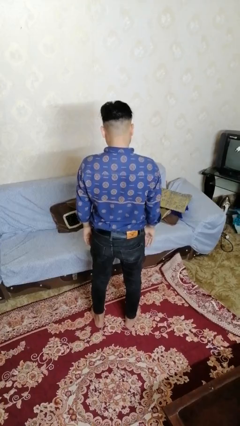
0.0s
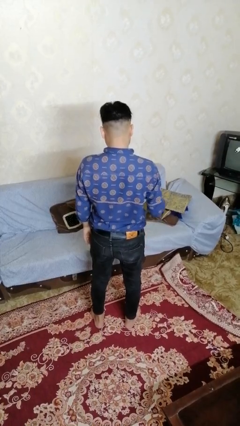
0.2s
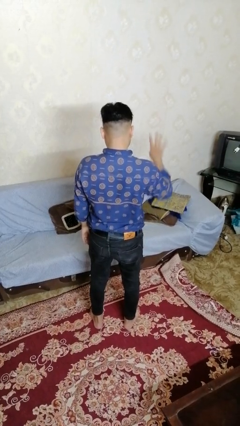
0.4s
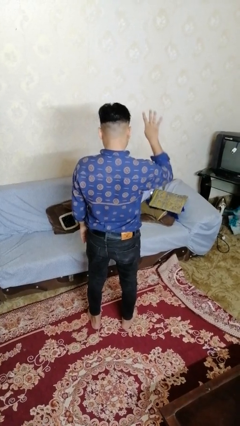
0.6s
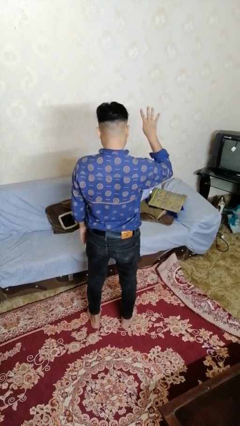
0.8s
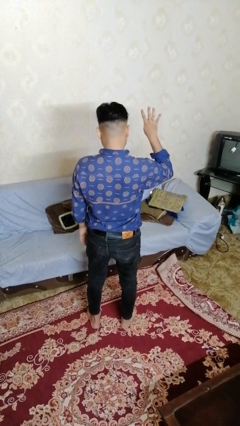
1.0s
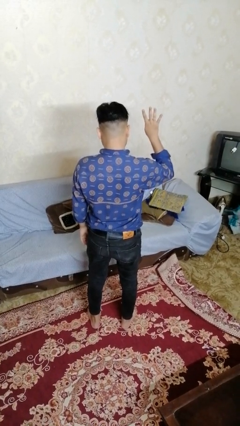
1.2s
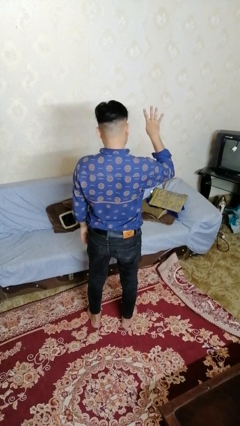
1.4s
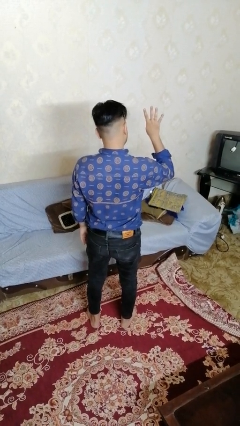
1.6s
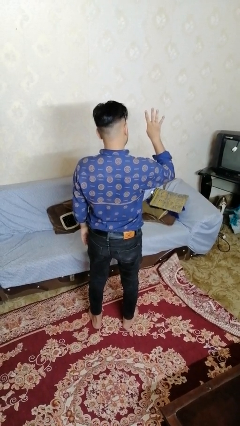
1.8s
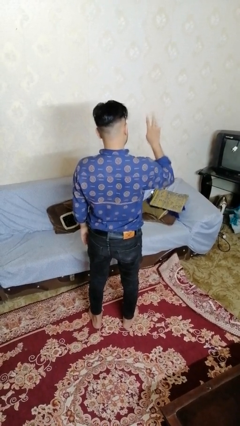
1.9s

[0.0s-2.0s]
person gestures number four

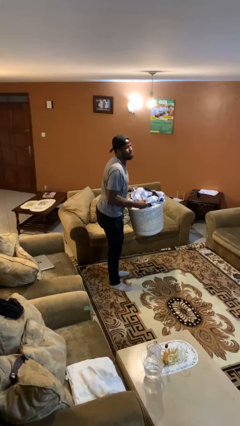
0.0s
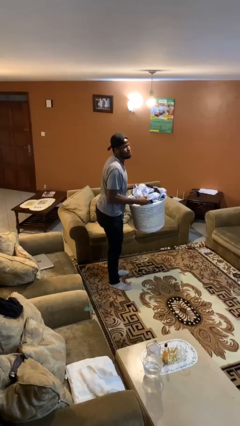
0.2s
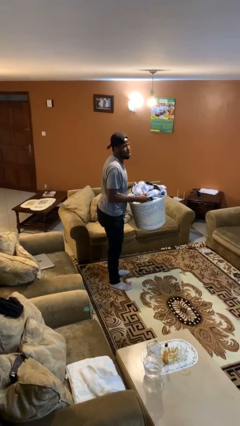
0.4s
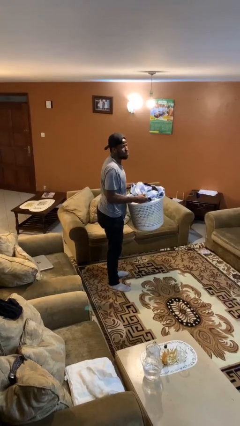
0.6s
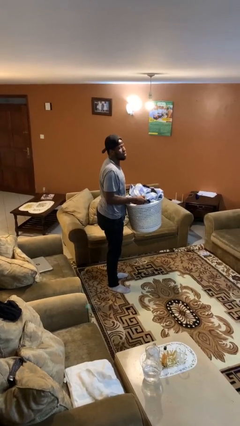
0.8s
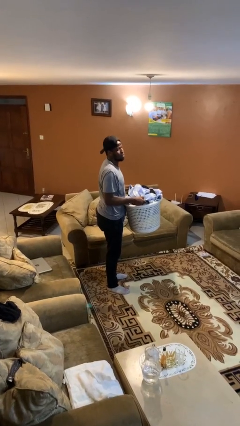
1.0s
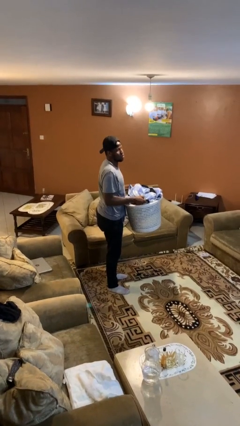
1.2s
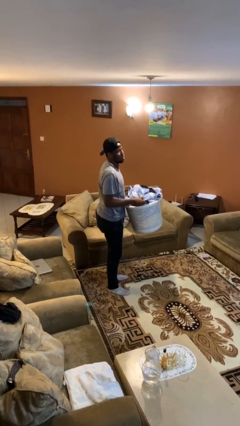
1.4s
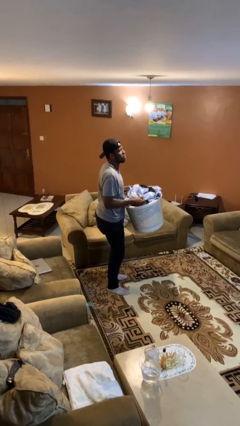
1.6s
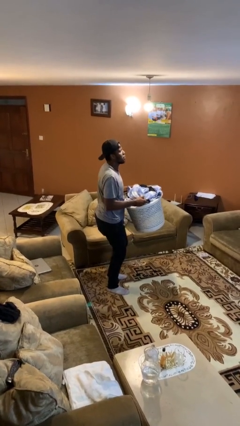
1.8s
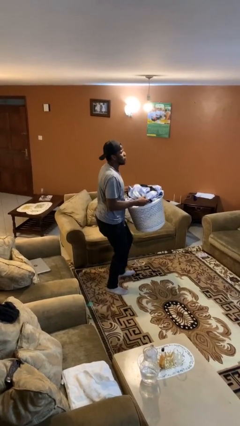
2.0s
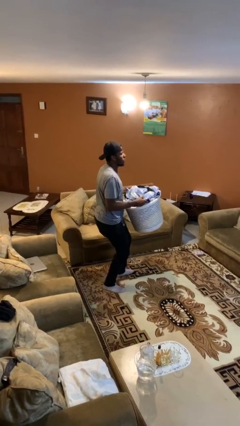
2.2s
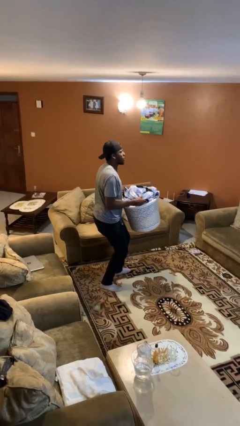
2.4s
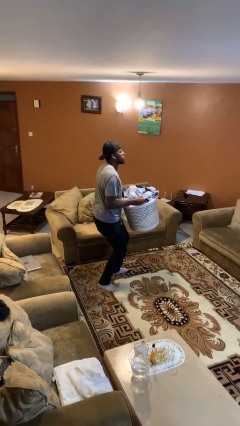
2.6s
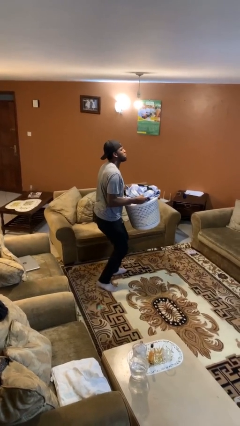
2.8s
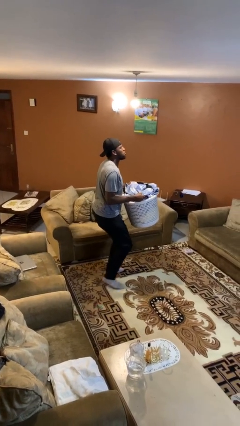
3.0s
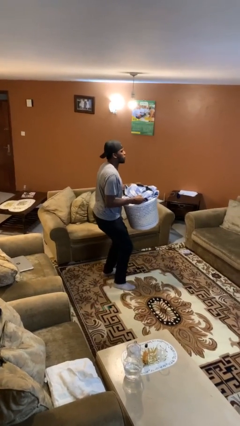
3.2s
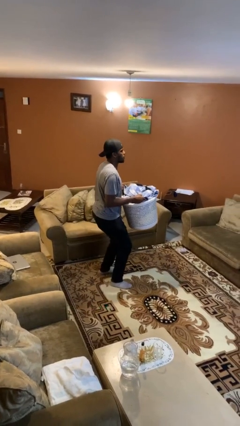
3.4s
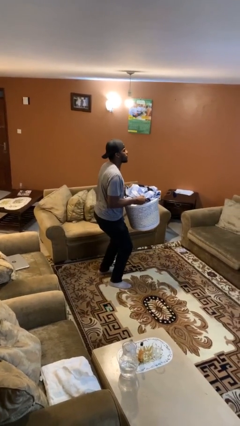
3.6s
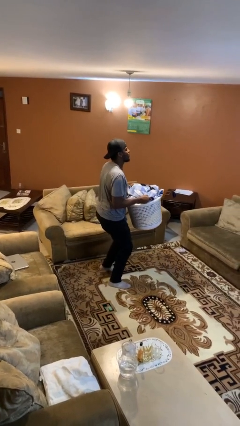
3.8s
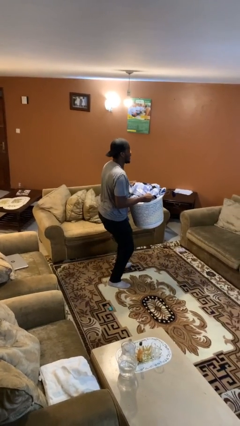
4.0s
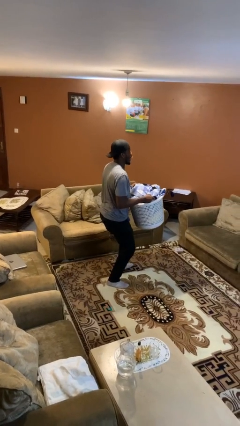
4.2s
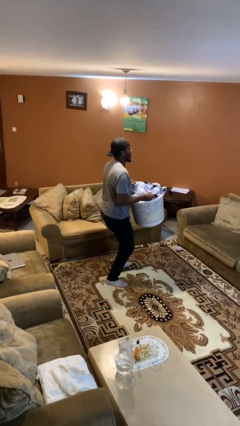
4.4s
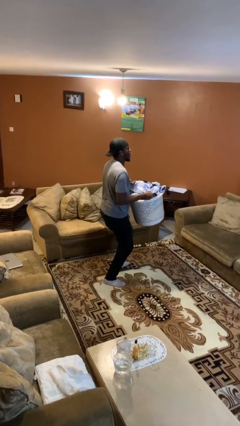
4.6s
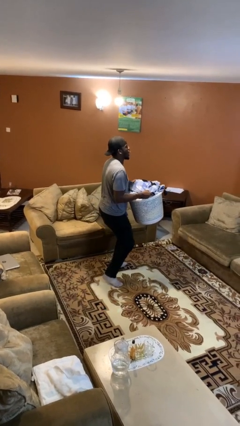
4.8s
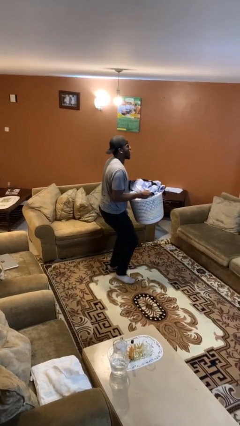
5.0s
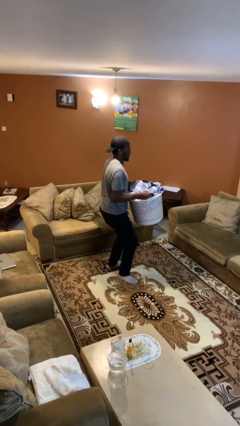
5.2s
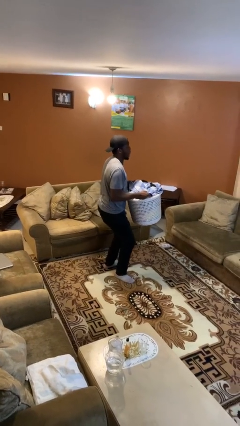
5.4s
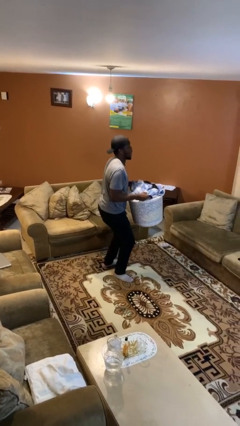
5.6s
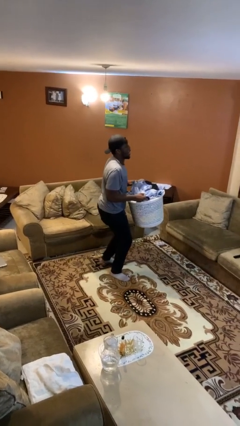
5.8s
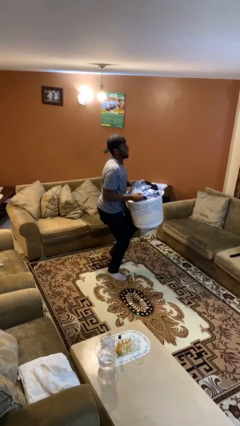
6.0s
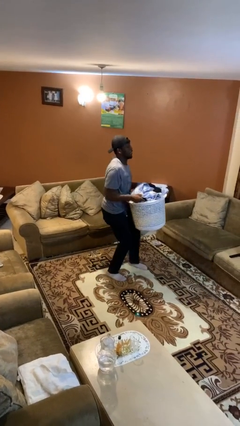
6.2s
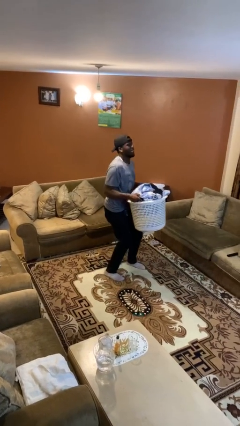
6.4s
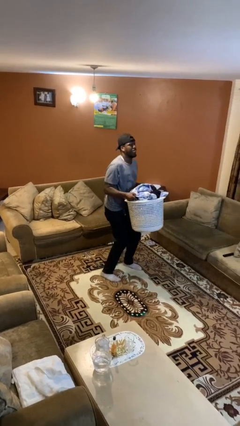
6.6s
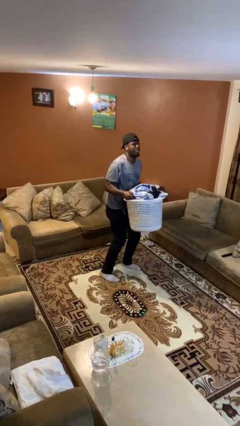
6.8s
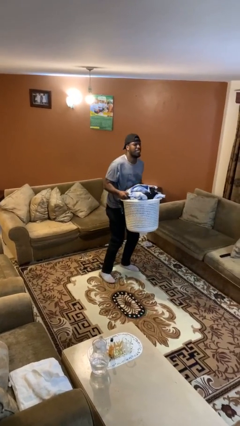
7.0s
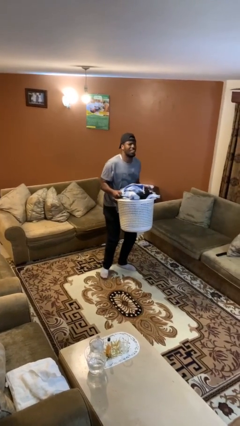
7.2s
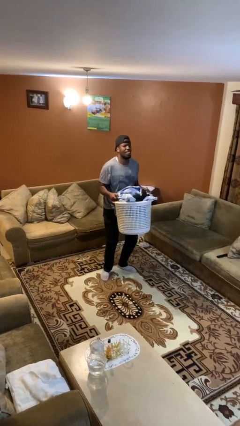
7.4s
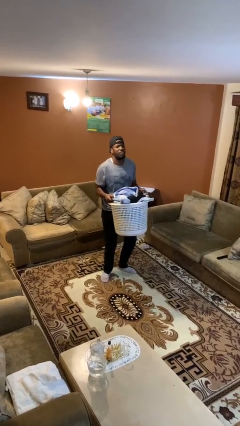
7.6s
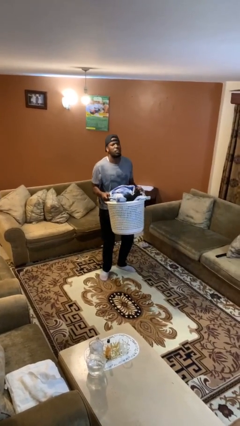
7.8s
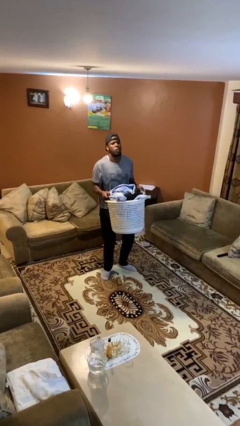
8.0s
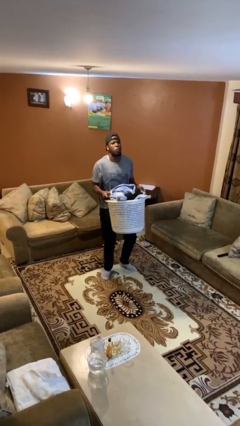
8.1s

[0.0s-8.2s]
person carries heavy object

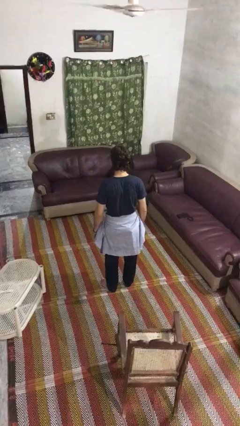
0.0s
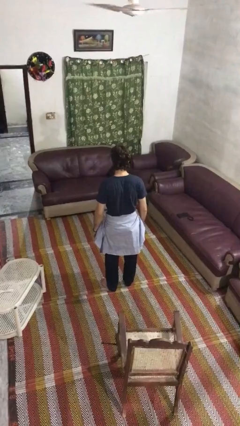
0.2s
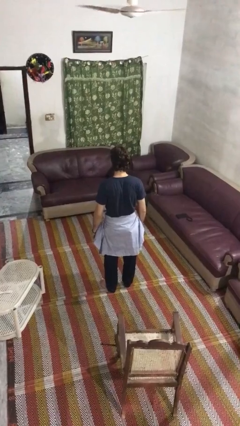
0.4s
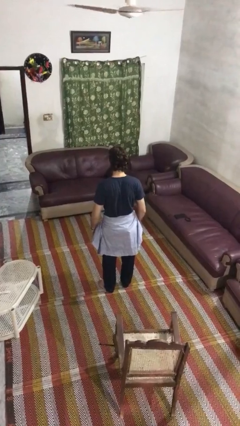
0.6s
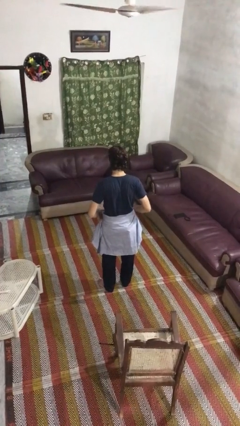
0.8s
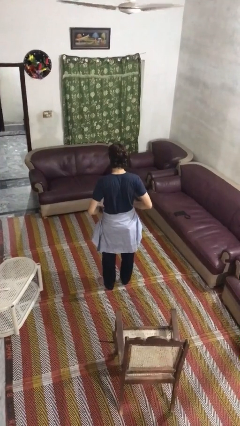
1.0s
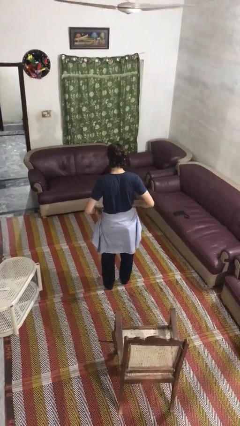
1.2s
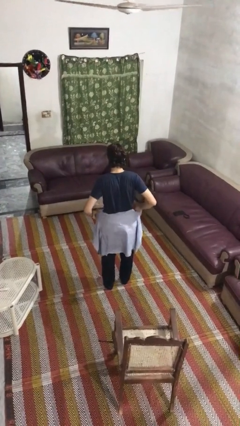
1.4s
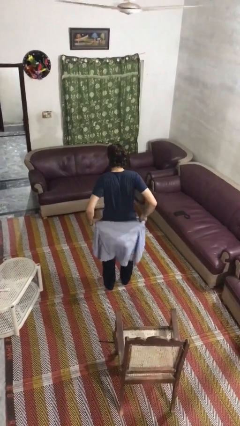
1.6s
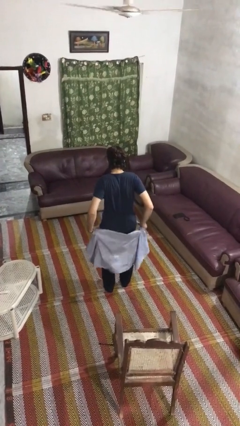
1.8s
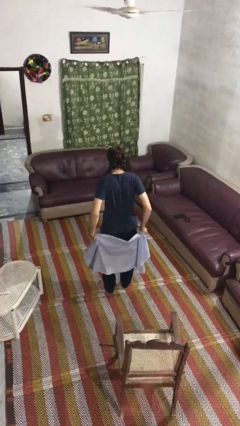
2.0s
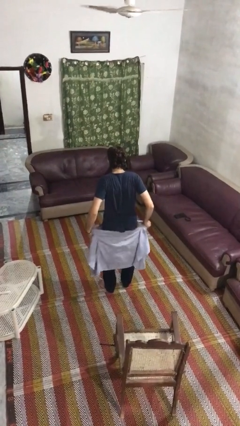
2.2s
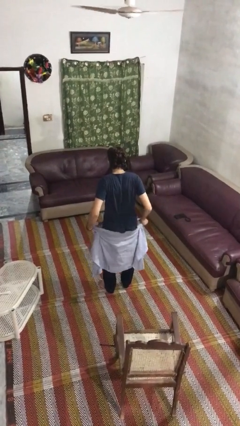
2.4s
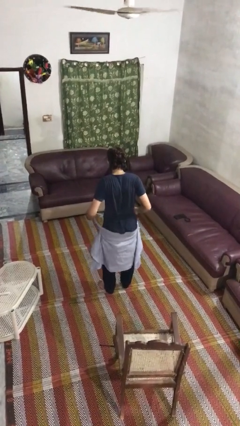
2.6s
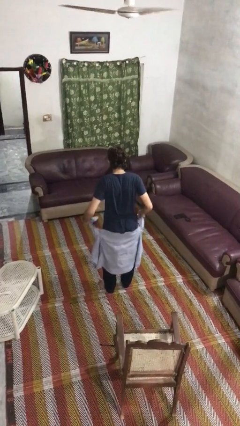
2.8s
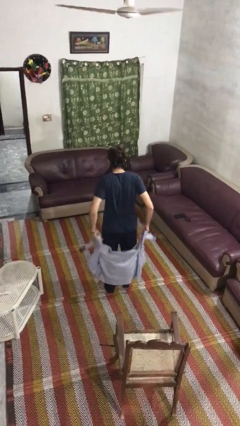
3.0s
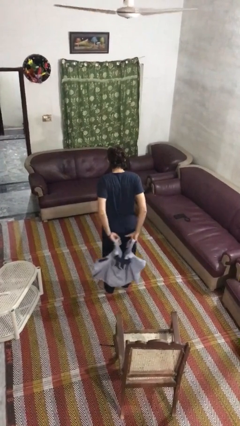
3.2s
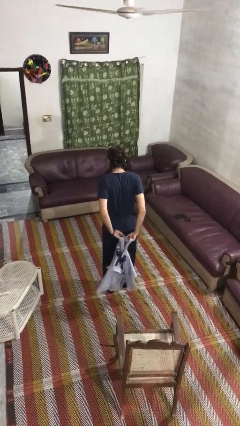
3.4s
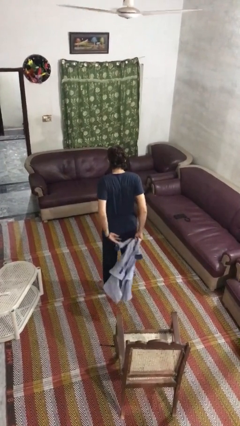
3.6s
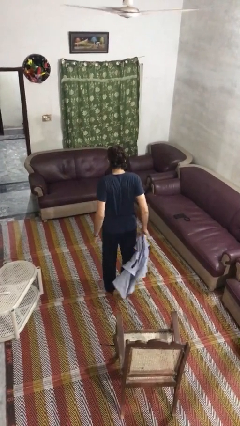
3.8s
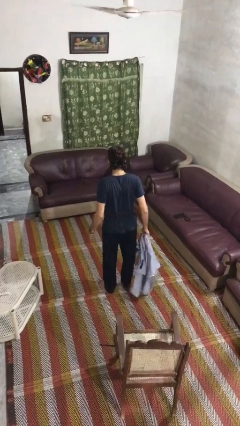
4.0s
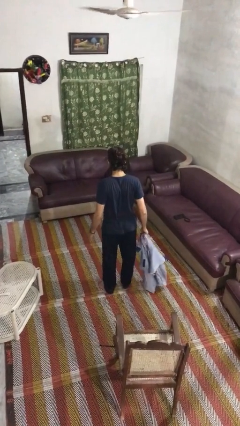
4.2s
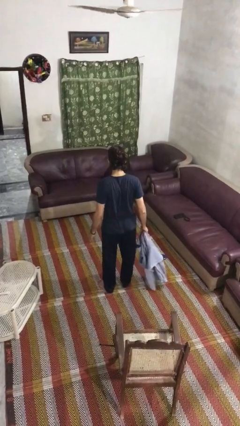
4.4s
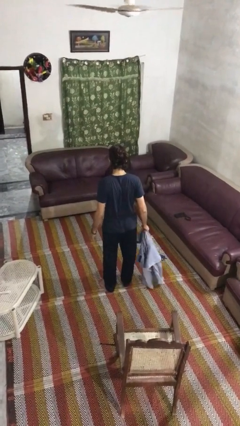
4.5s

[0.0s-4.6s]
person unties jacket around waist

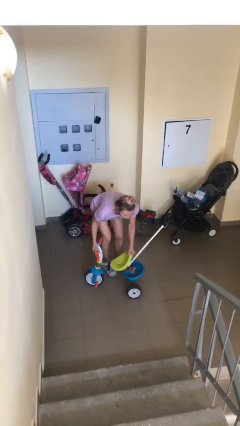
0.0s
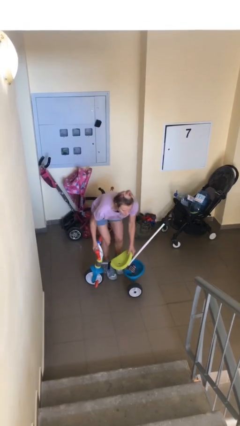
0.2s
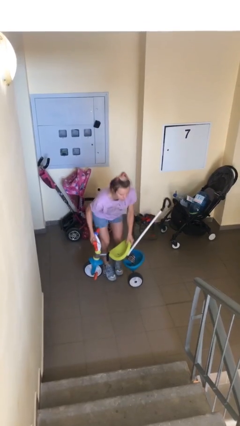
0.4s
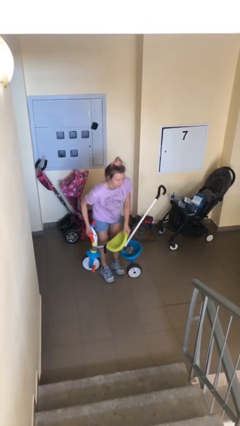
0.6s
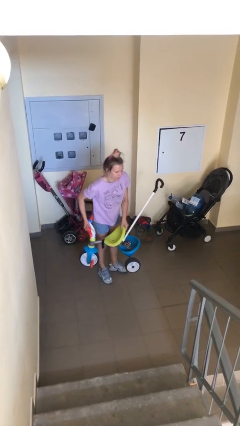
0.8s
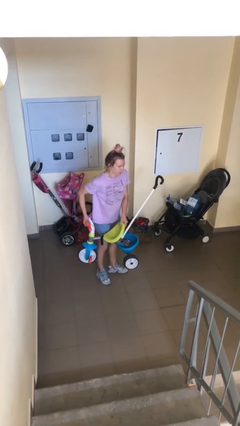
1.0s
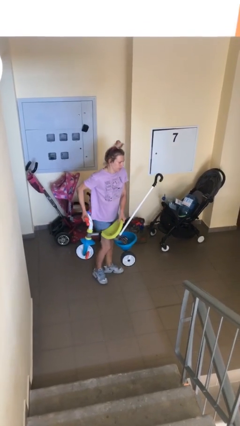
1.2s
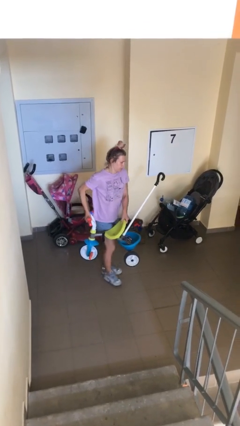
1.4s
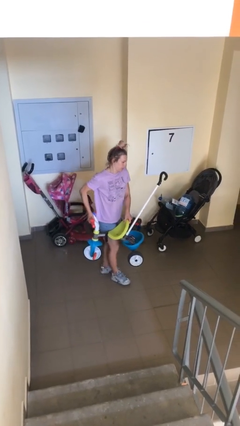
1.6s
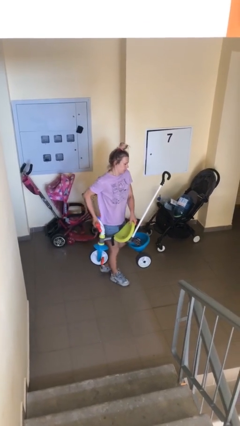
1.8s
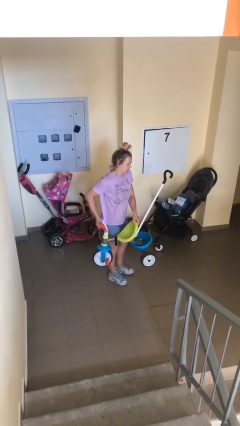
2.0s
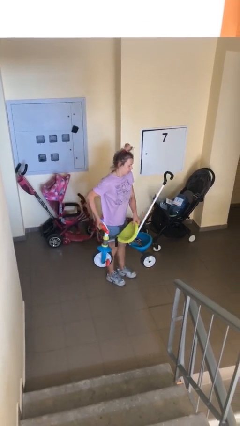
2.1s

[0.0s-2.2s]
person carries bicycle

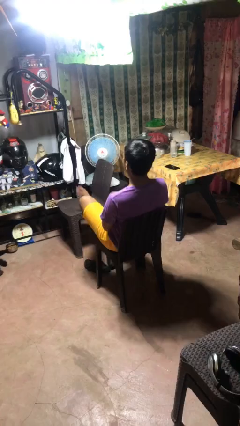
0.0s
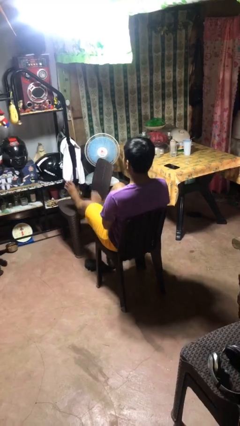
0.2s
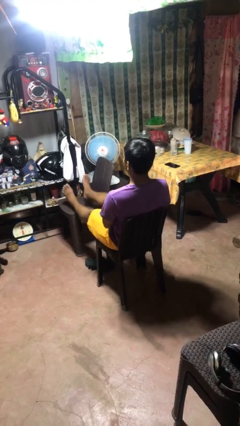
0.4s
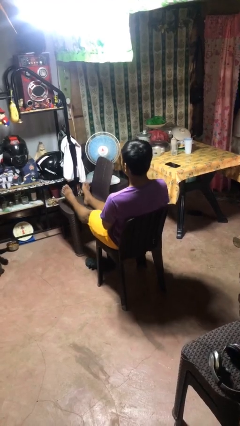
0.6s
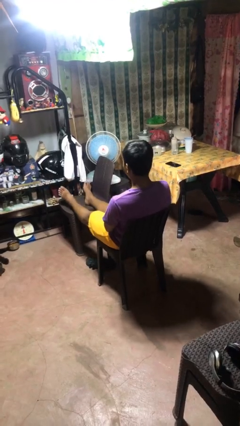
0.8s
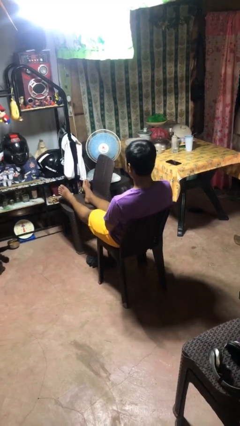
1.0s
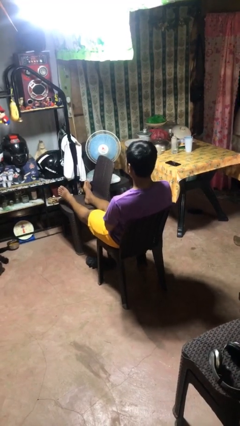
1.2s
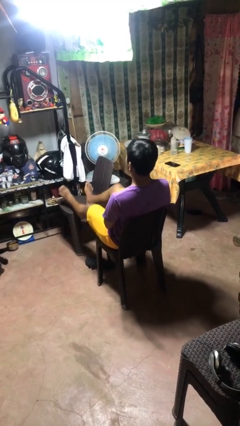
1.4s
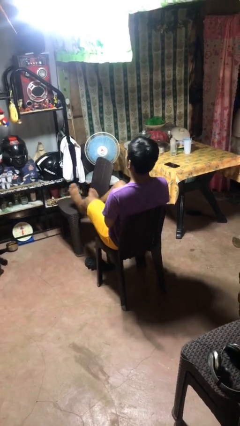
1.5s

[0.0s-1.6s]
person puts feet up
